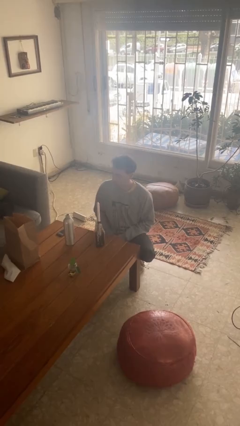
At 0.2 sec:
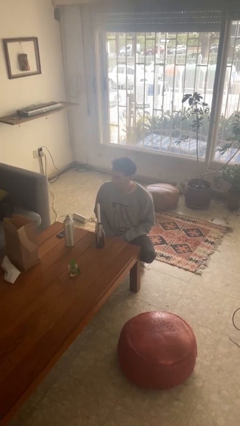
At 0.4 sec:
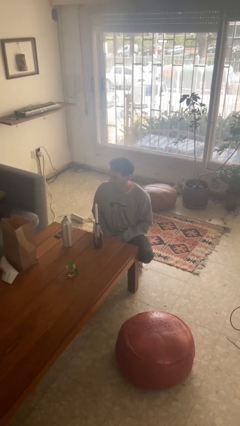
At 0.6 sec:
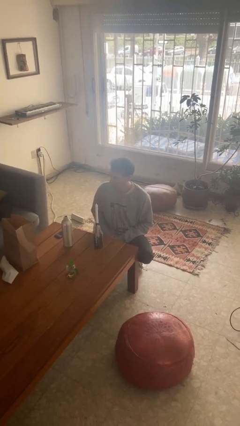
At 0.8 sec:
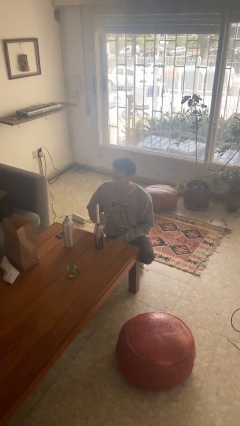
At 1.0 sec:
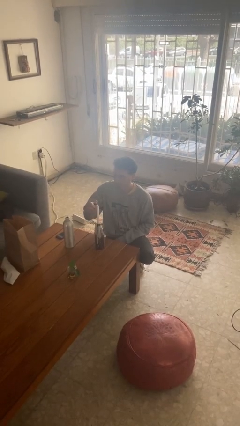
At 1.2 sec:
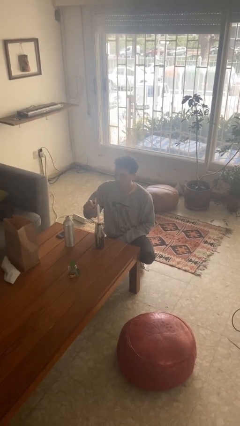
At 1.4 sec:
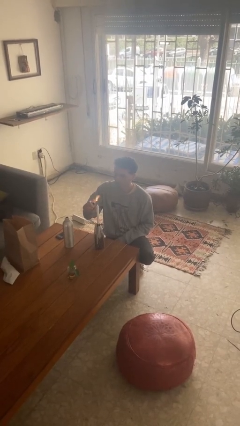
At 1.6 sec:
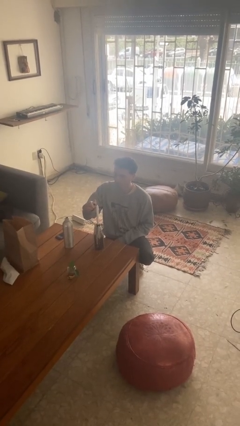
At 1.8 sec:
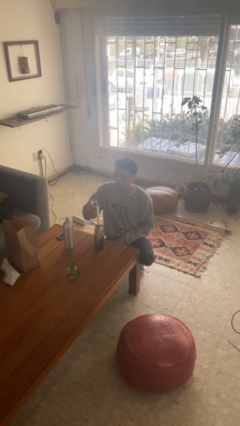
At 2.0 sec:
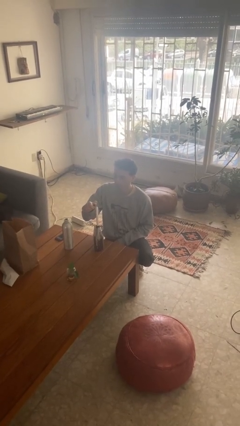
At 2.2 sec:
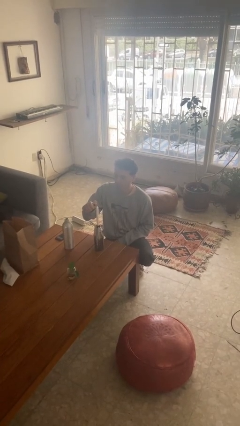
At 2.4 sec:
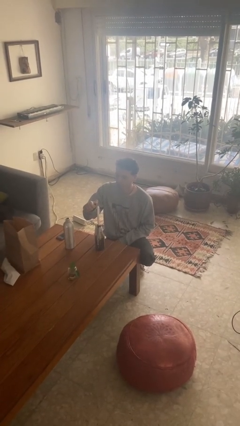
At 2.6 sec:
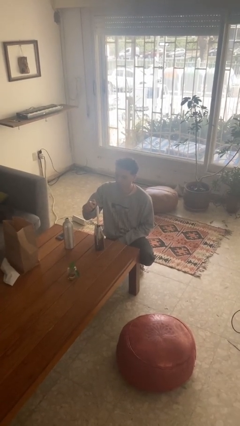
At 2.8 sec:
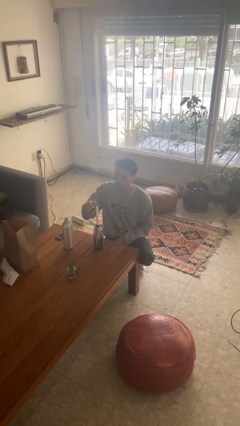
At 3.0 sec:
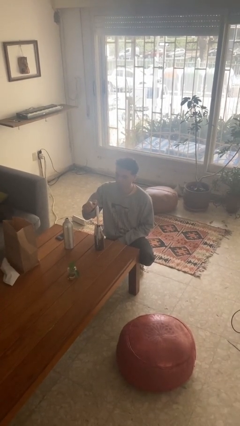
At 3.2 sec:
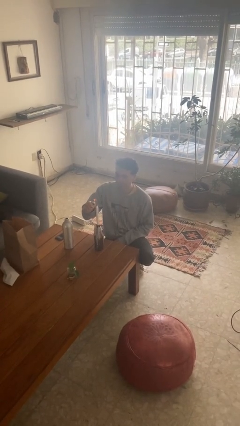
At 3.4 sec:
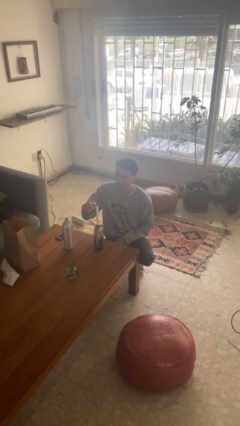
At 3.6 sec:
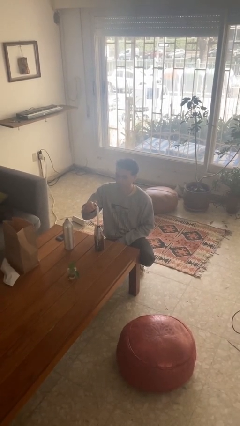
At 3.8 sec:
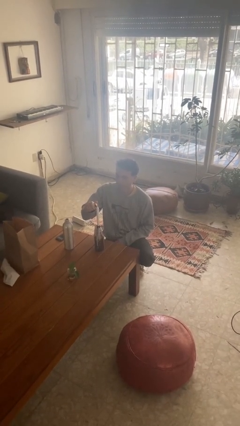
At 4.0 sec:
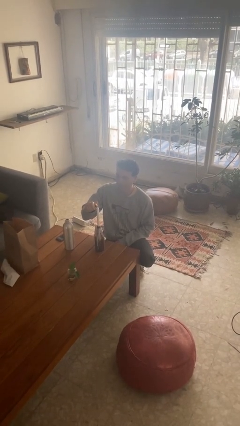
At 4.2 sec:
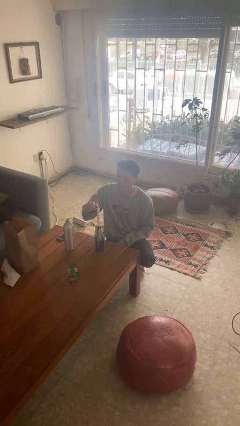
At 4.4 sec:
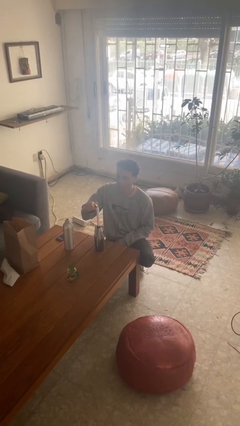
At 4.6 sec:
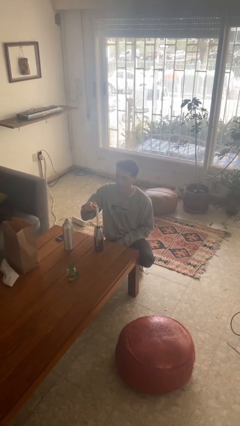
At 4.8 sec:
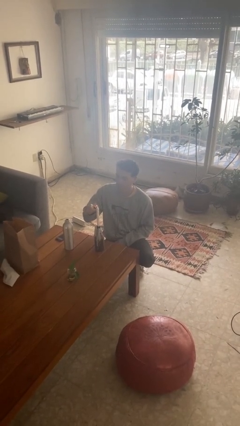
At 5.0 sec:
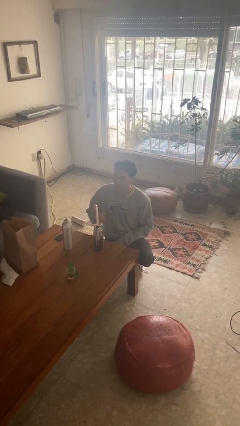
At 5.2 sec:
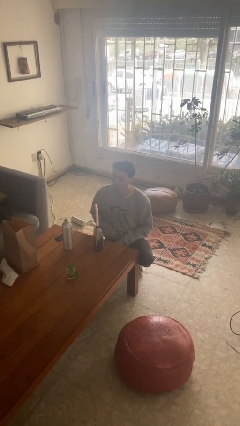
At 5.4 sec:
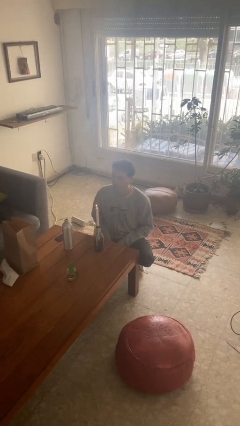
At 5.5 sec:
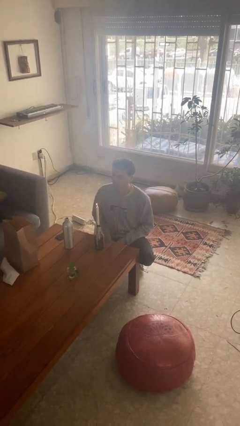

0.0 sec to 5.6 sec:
person lights candle

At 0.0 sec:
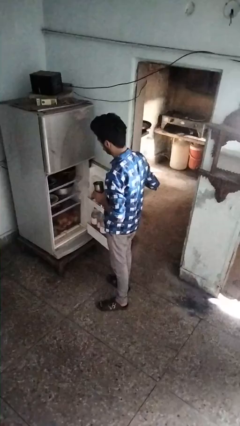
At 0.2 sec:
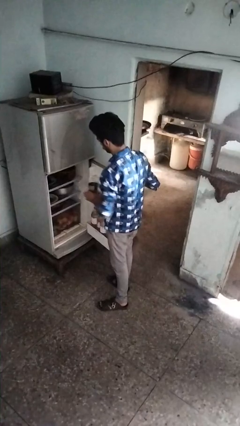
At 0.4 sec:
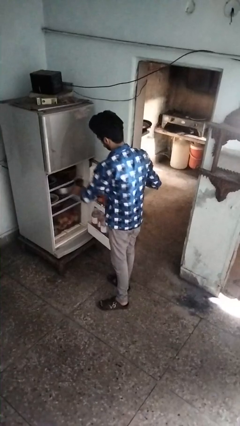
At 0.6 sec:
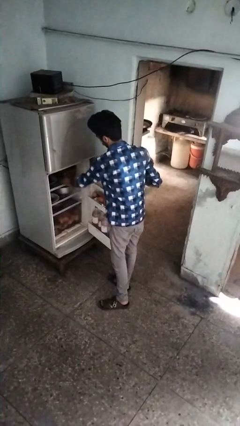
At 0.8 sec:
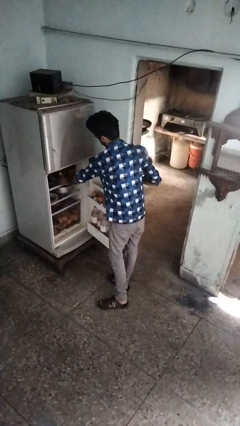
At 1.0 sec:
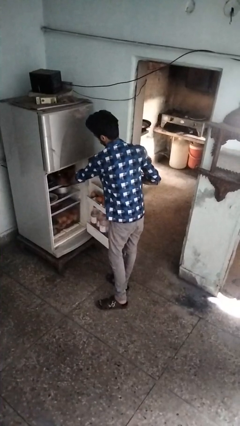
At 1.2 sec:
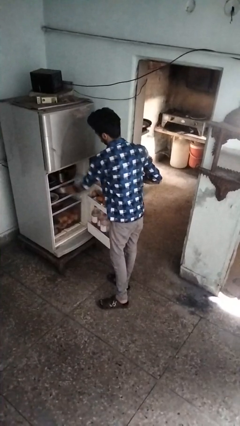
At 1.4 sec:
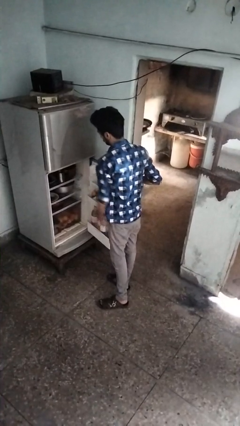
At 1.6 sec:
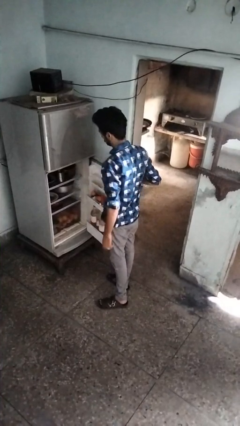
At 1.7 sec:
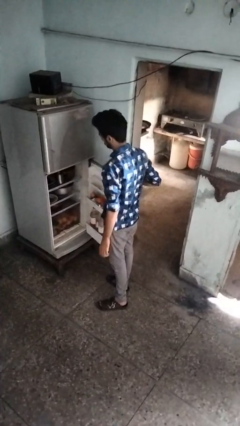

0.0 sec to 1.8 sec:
person puts object into refrigerator

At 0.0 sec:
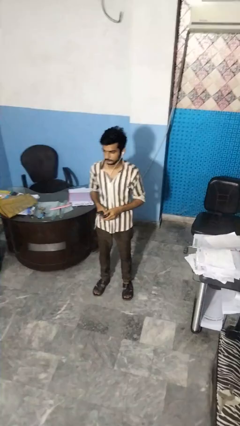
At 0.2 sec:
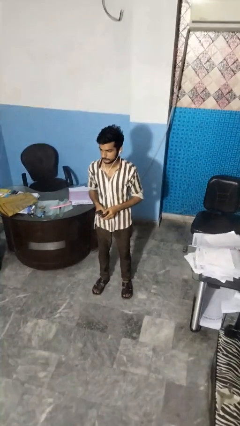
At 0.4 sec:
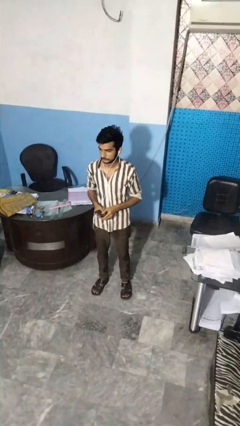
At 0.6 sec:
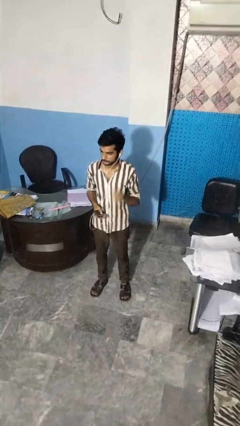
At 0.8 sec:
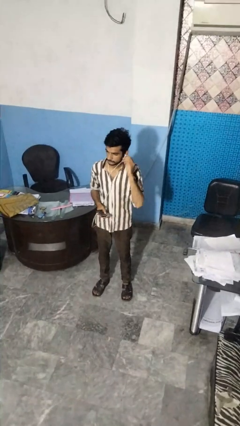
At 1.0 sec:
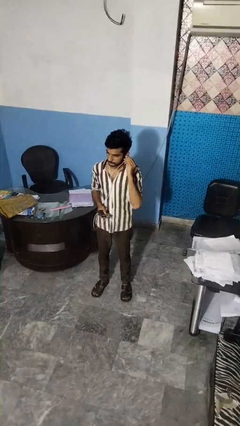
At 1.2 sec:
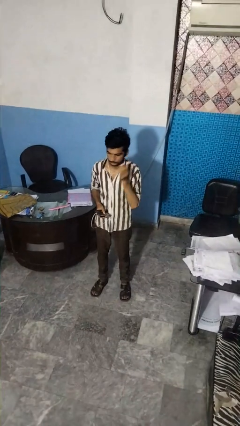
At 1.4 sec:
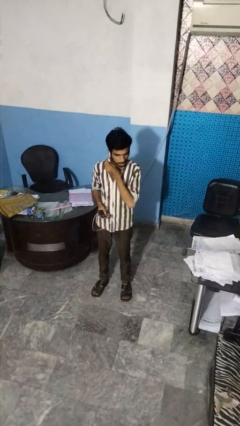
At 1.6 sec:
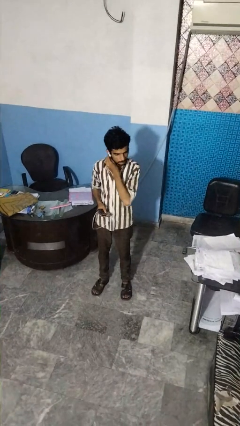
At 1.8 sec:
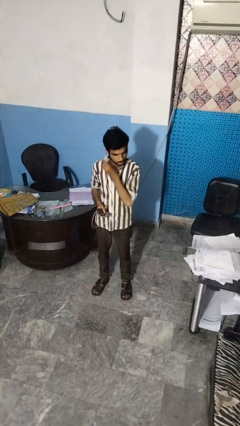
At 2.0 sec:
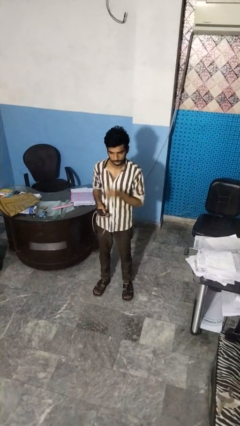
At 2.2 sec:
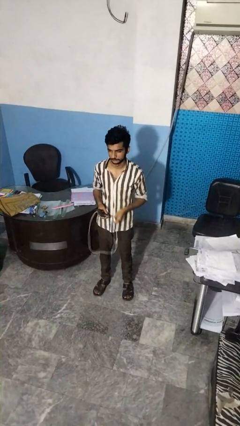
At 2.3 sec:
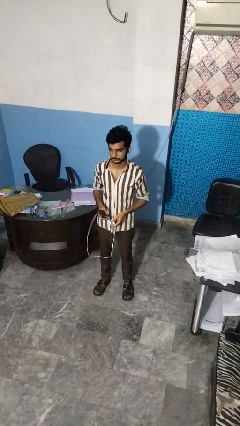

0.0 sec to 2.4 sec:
person takes off headphones

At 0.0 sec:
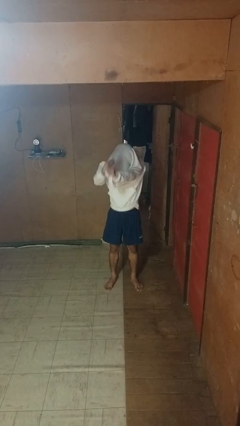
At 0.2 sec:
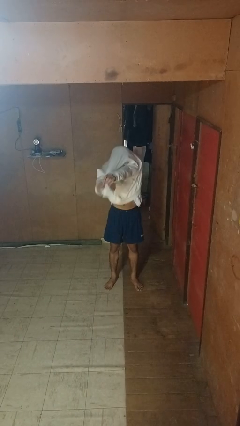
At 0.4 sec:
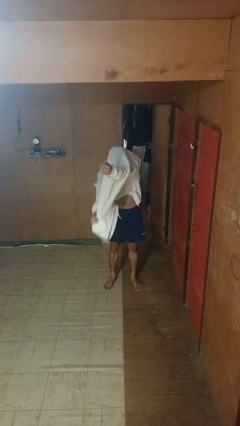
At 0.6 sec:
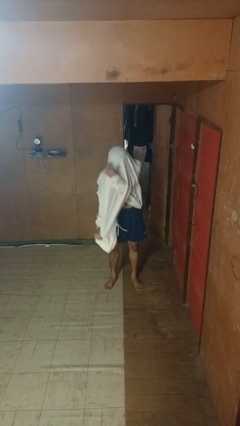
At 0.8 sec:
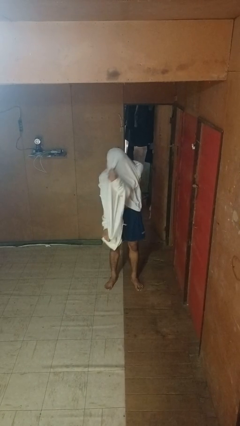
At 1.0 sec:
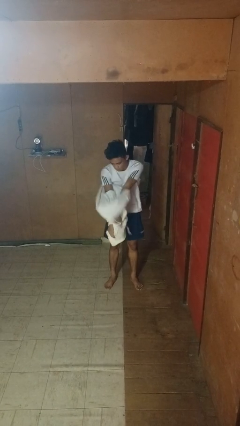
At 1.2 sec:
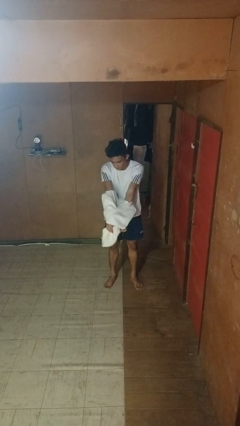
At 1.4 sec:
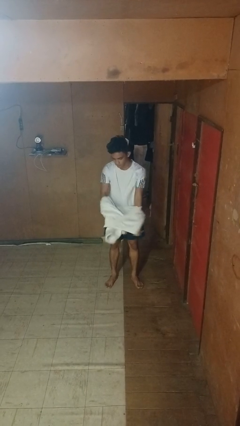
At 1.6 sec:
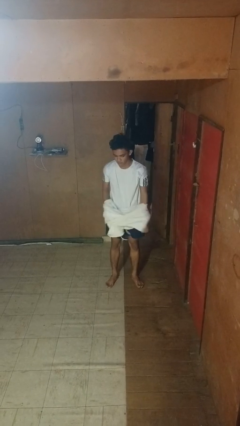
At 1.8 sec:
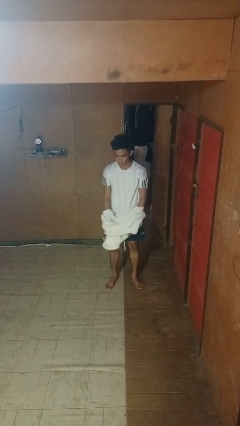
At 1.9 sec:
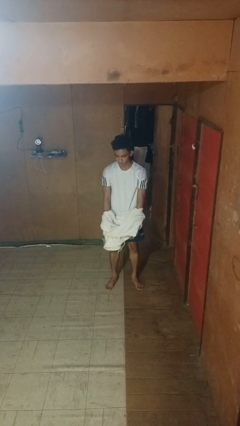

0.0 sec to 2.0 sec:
person takes off hoodie

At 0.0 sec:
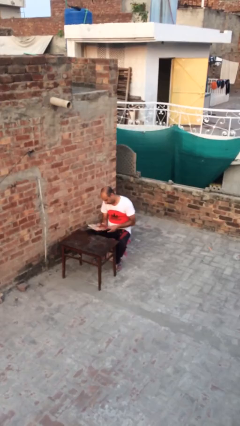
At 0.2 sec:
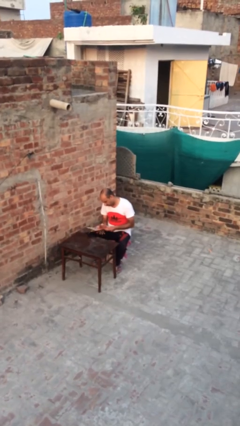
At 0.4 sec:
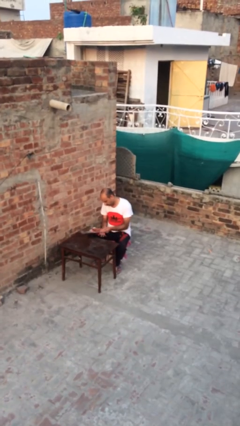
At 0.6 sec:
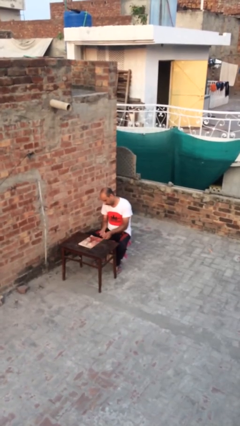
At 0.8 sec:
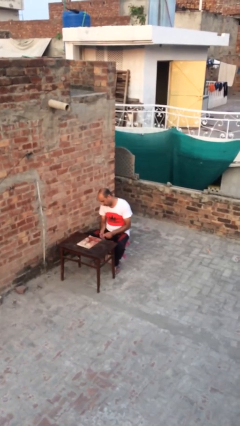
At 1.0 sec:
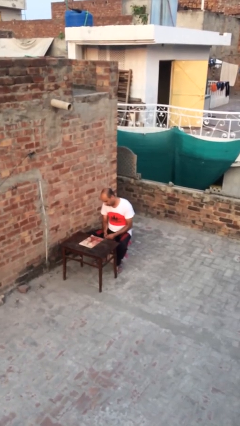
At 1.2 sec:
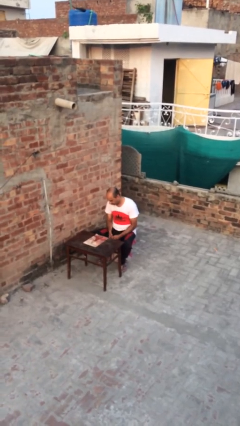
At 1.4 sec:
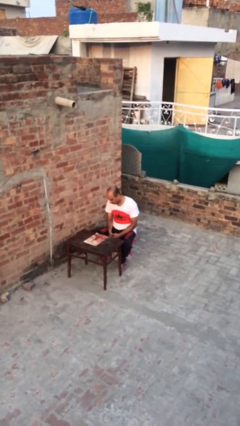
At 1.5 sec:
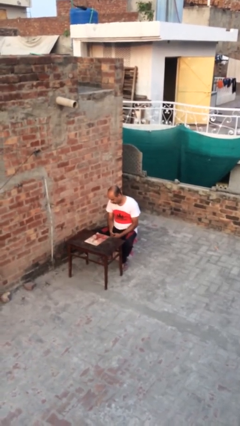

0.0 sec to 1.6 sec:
person puts down object on table

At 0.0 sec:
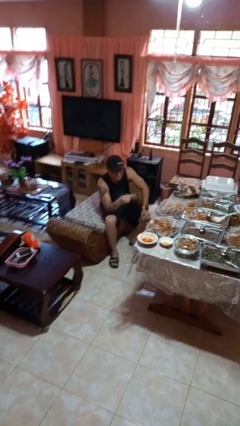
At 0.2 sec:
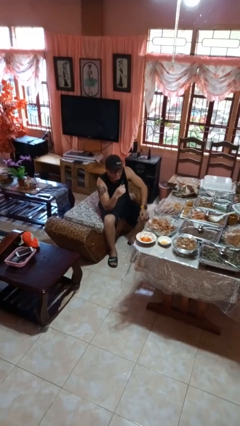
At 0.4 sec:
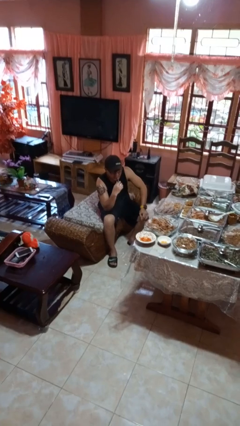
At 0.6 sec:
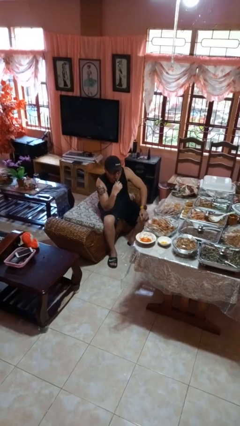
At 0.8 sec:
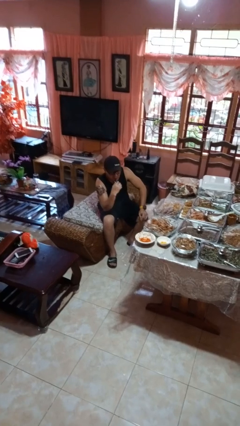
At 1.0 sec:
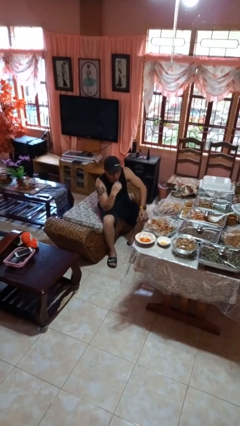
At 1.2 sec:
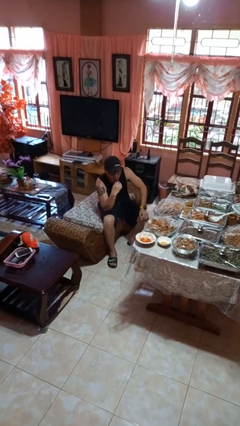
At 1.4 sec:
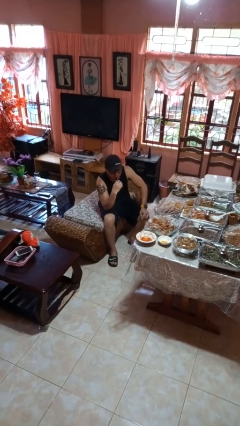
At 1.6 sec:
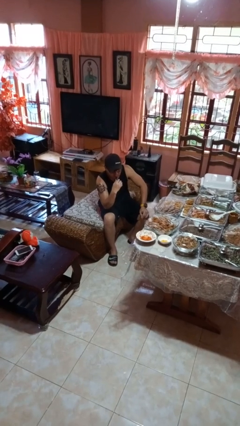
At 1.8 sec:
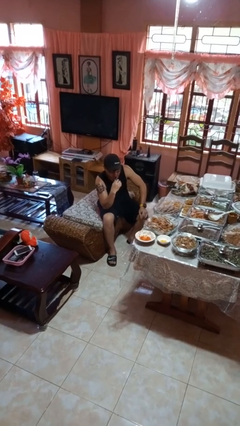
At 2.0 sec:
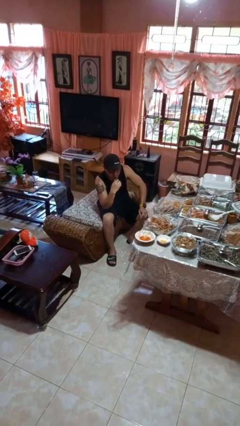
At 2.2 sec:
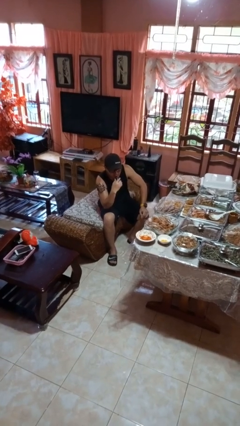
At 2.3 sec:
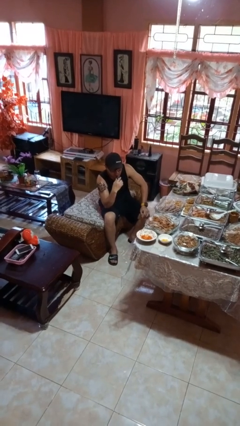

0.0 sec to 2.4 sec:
person vapes

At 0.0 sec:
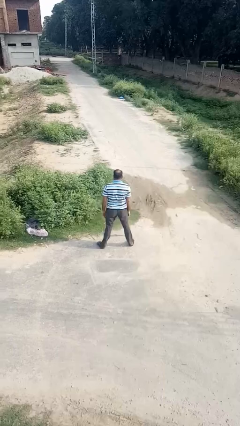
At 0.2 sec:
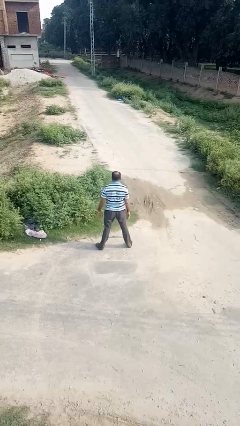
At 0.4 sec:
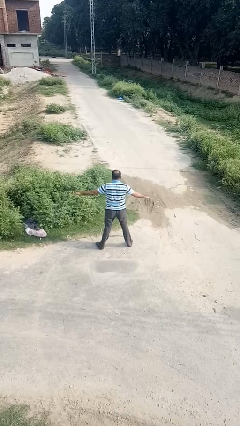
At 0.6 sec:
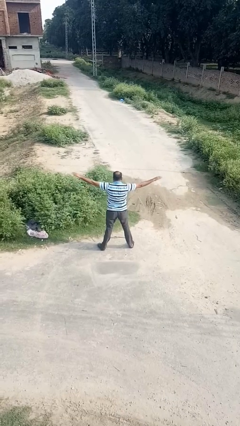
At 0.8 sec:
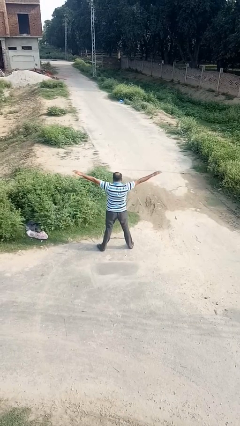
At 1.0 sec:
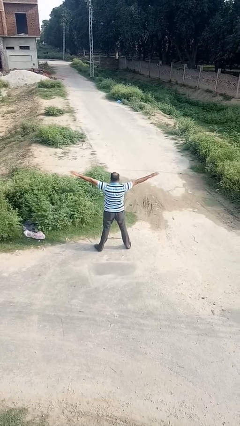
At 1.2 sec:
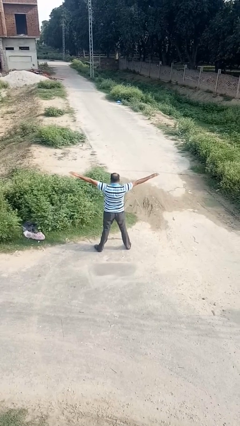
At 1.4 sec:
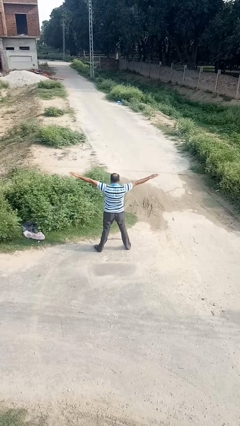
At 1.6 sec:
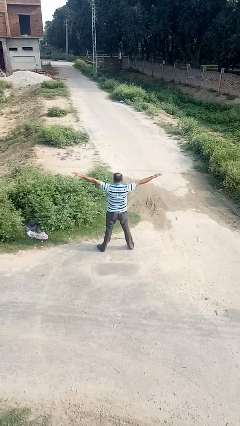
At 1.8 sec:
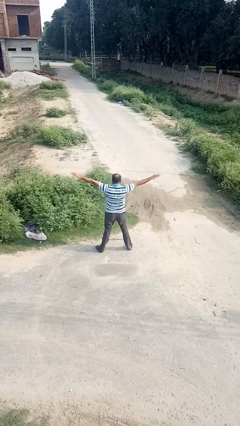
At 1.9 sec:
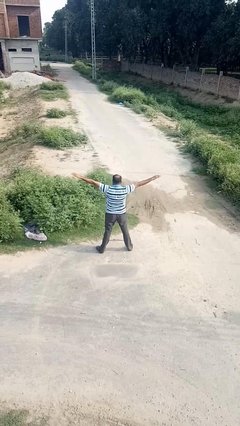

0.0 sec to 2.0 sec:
person stretches arms to side
